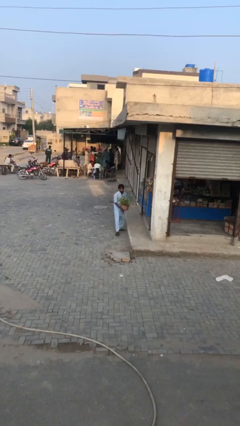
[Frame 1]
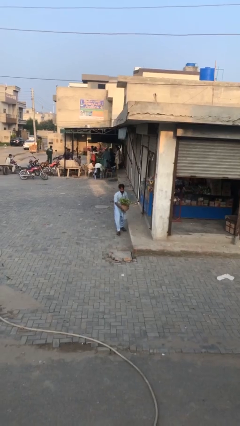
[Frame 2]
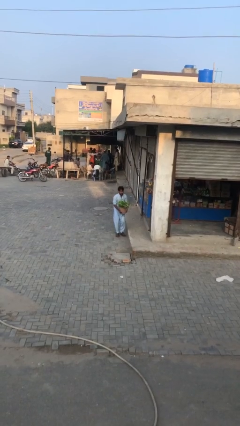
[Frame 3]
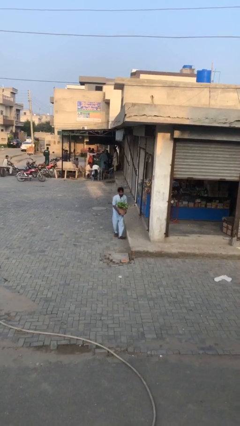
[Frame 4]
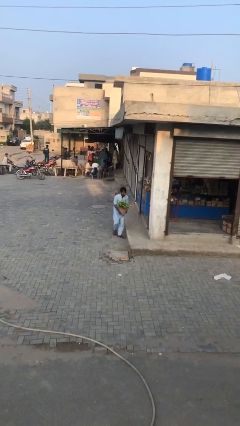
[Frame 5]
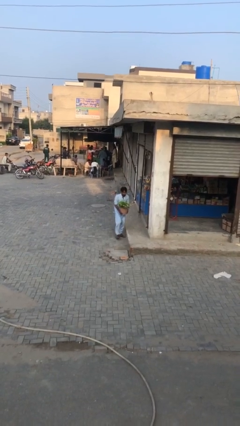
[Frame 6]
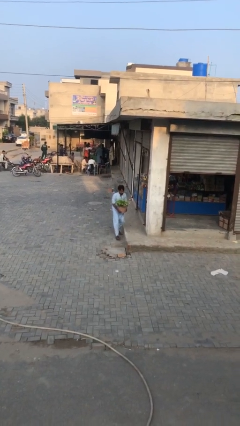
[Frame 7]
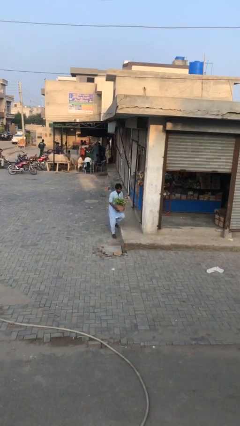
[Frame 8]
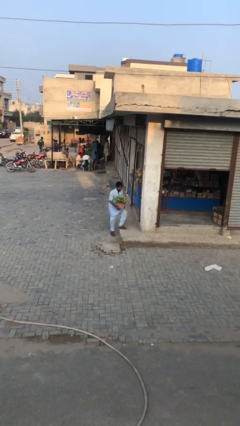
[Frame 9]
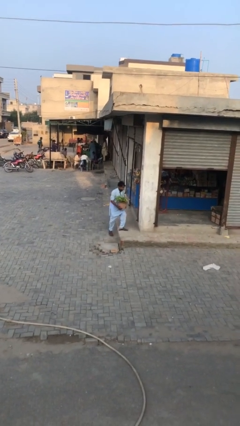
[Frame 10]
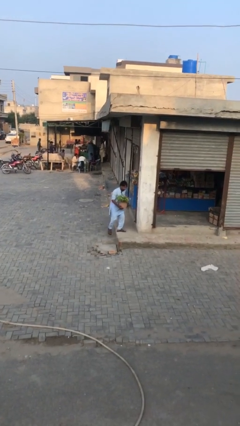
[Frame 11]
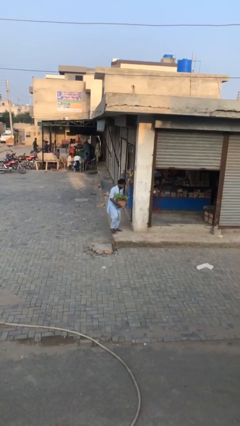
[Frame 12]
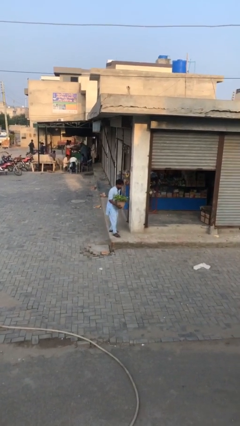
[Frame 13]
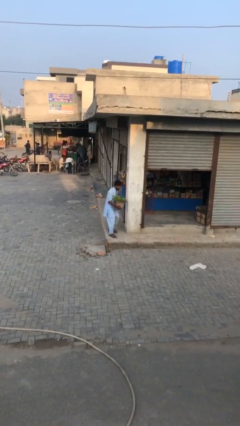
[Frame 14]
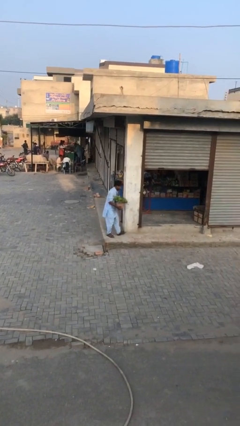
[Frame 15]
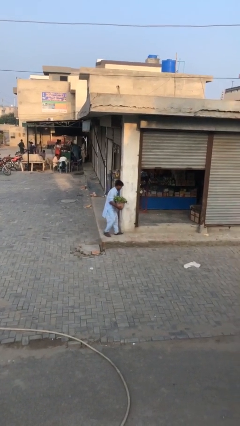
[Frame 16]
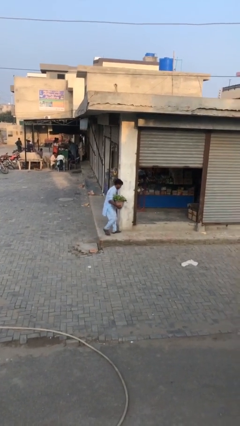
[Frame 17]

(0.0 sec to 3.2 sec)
person carries heavy object

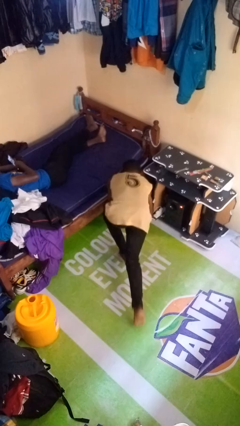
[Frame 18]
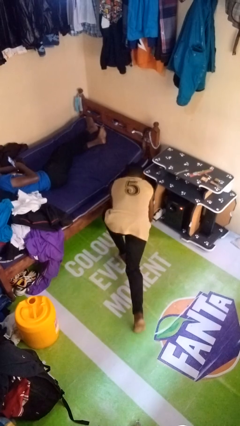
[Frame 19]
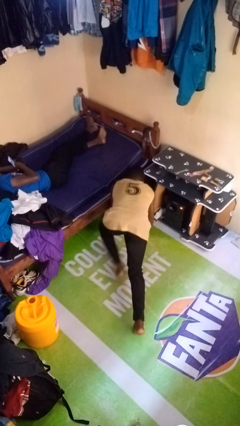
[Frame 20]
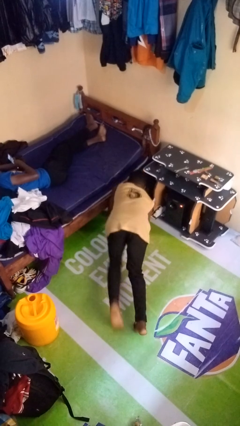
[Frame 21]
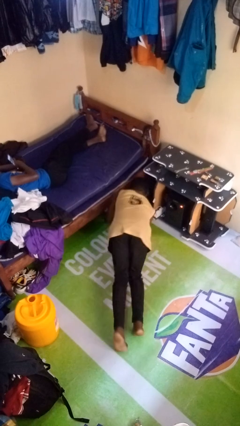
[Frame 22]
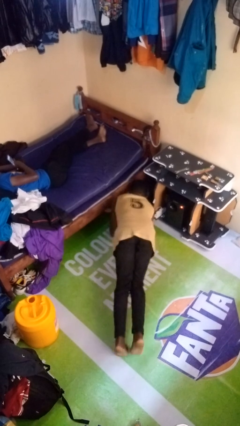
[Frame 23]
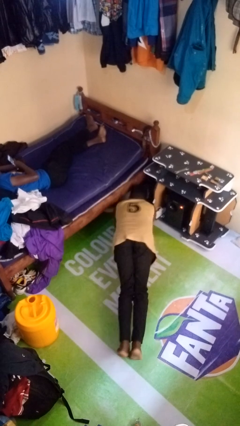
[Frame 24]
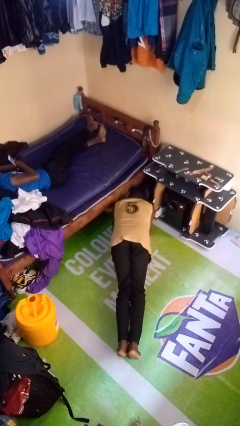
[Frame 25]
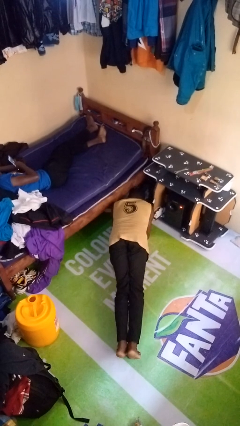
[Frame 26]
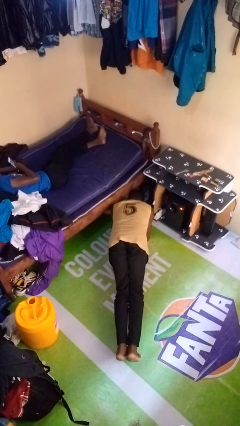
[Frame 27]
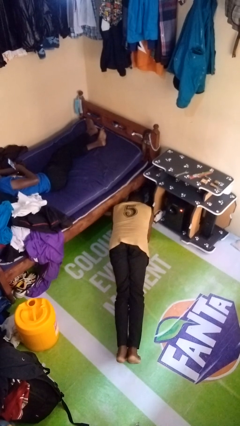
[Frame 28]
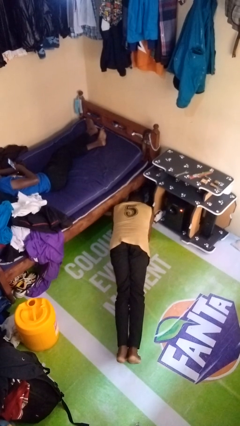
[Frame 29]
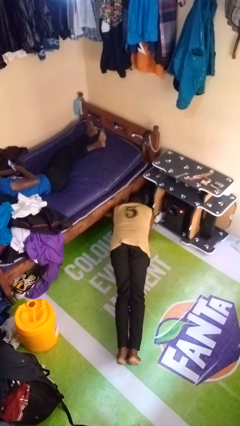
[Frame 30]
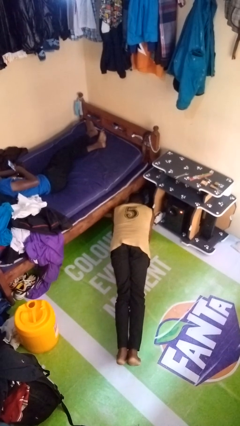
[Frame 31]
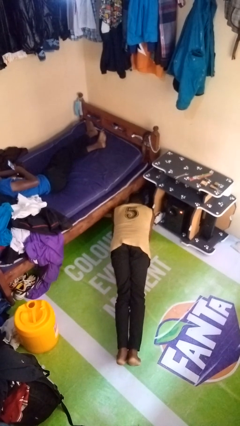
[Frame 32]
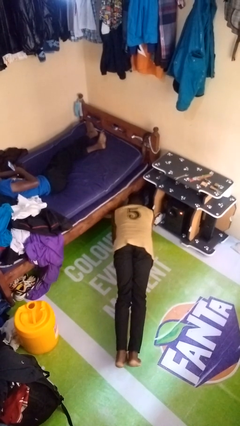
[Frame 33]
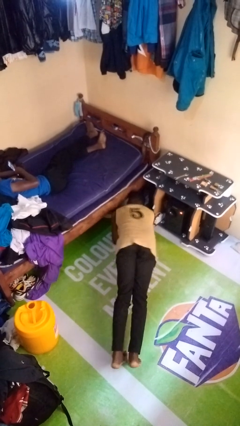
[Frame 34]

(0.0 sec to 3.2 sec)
person exercises with plank

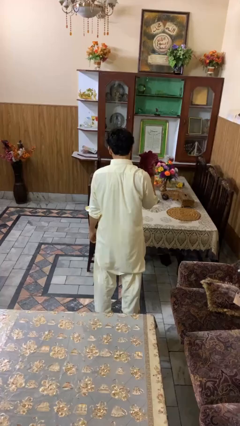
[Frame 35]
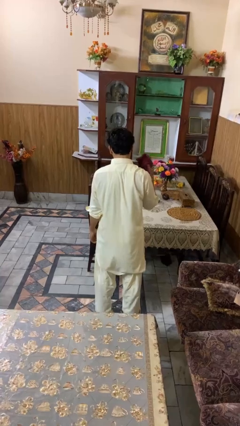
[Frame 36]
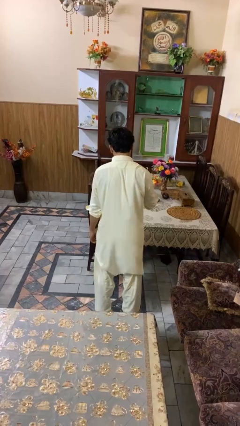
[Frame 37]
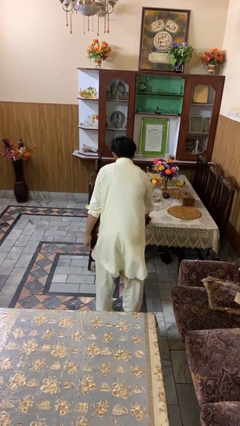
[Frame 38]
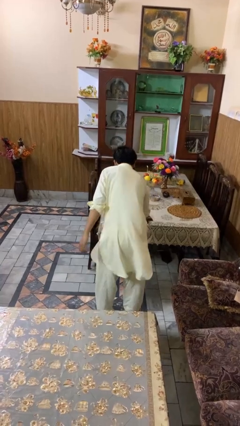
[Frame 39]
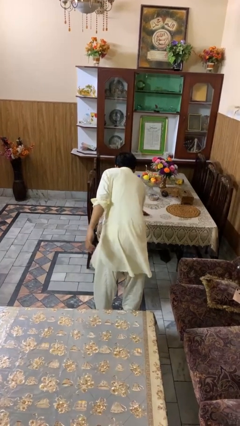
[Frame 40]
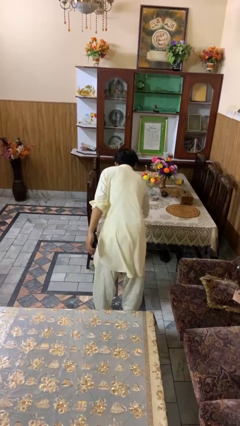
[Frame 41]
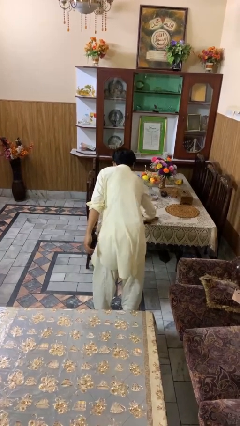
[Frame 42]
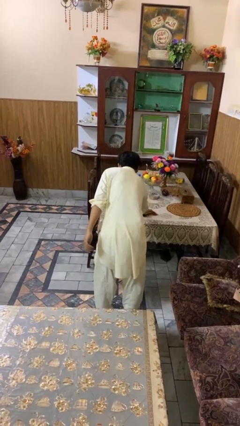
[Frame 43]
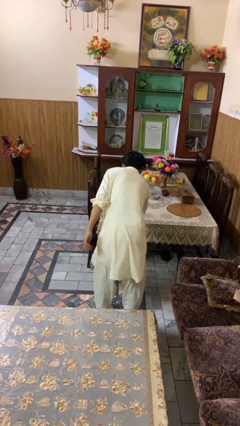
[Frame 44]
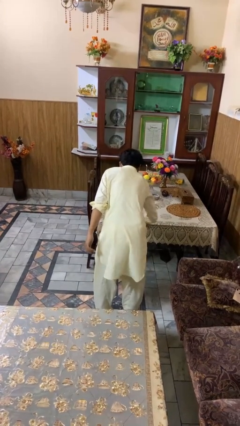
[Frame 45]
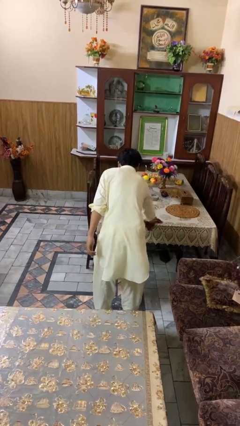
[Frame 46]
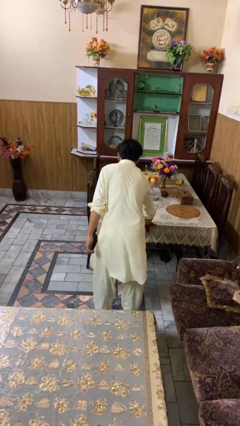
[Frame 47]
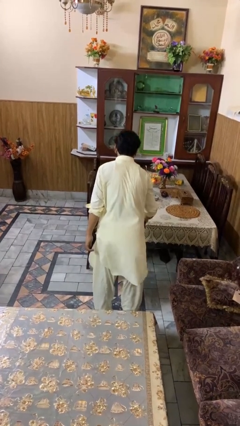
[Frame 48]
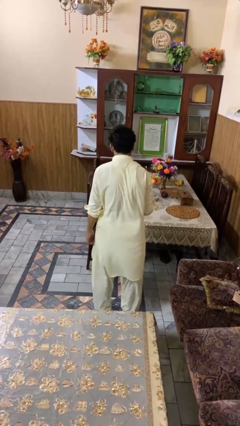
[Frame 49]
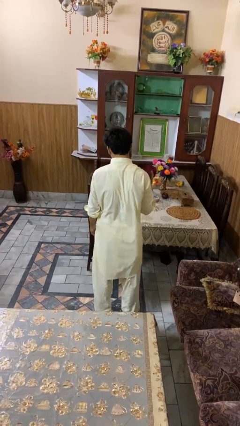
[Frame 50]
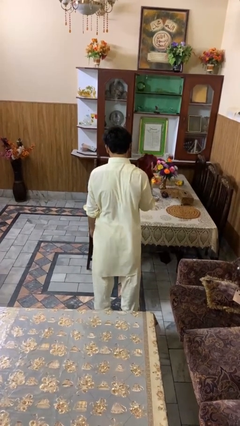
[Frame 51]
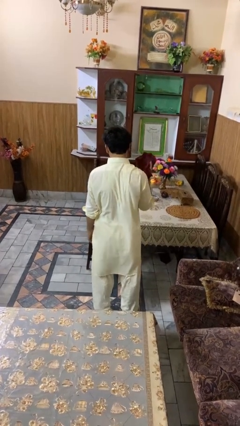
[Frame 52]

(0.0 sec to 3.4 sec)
person cleans table with rag

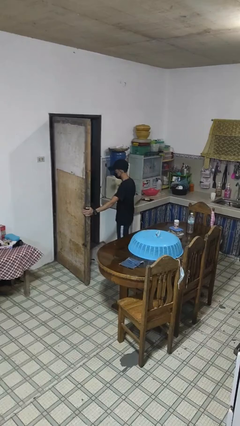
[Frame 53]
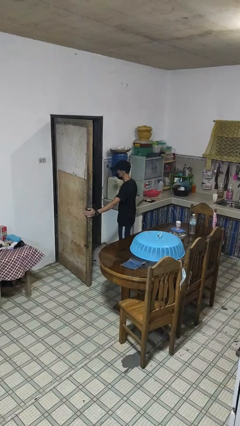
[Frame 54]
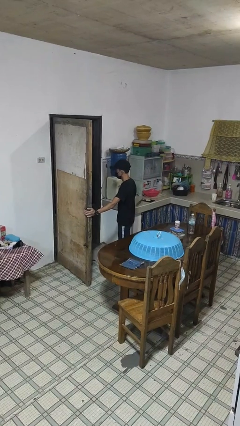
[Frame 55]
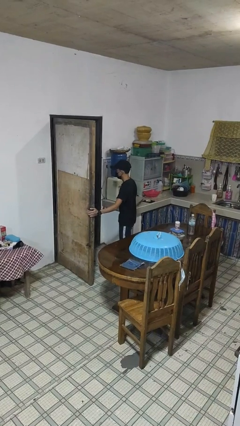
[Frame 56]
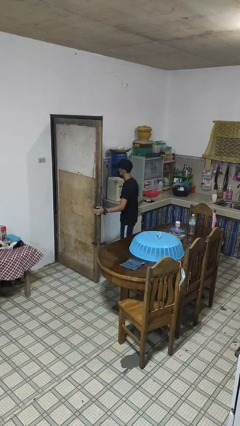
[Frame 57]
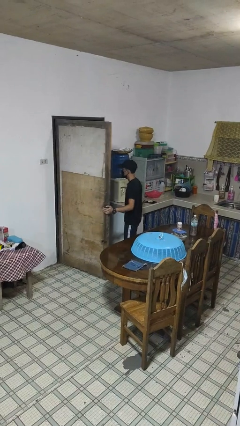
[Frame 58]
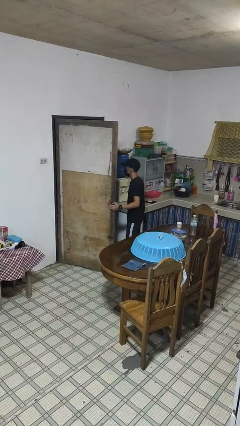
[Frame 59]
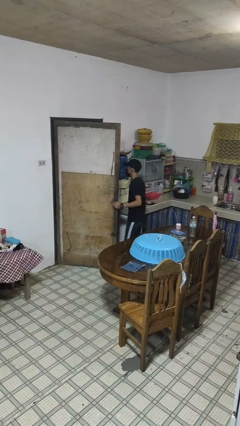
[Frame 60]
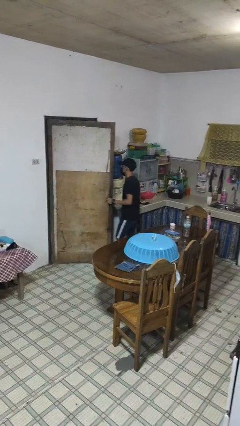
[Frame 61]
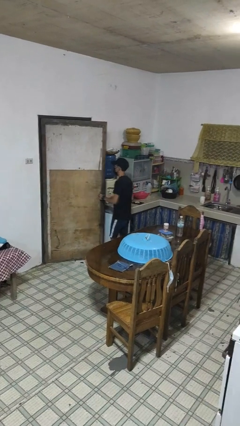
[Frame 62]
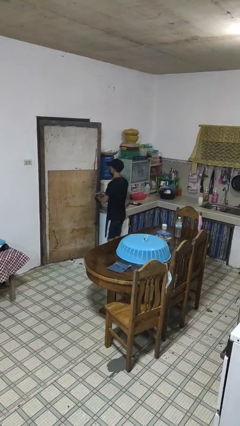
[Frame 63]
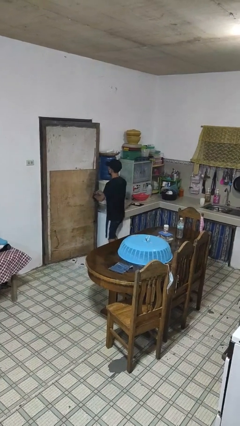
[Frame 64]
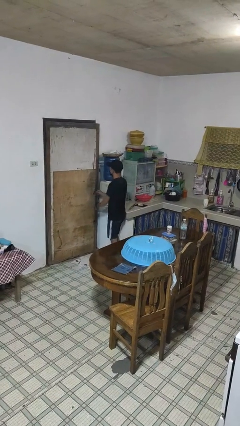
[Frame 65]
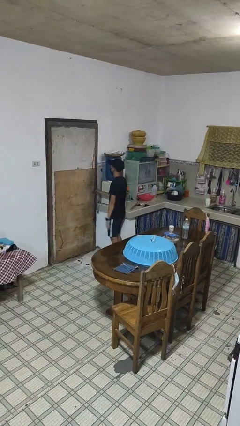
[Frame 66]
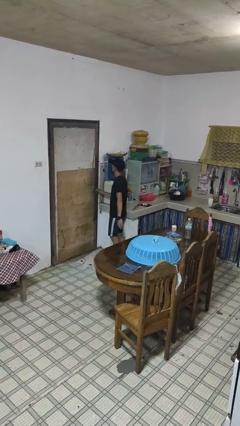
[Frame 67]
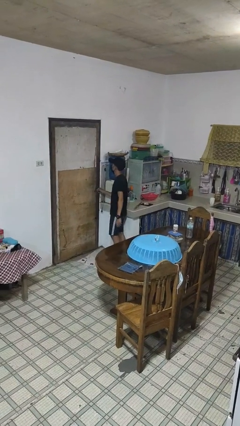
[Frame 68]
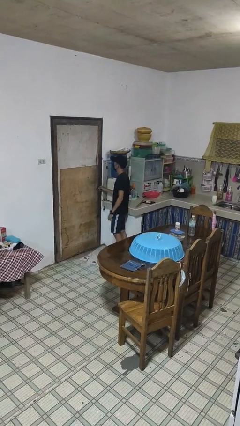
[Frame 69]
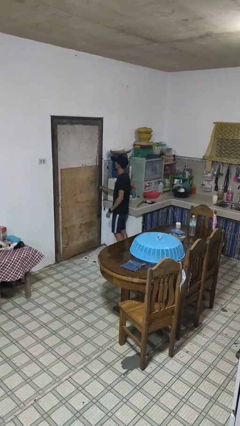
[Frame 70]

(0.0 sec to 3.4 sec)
person closes facility door

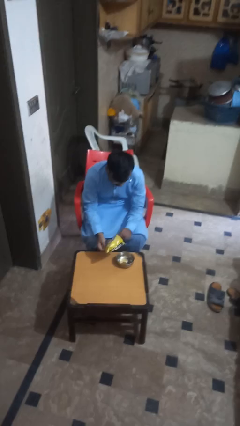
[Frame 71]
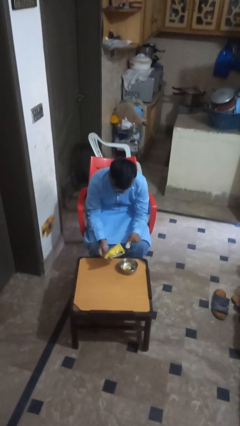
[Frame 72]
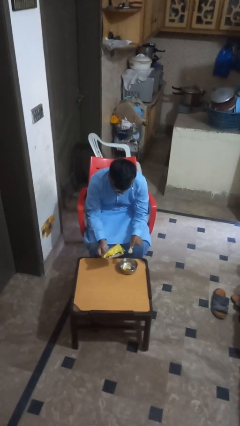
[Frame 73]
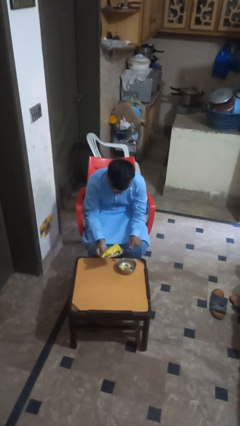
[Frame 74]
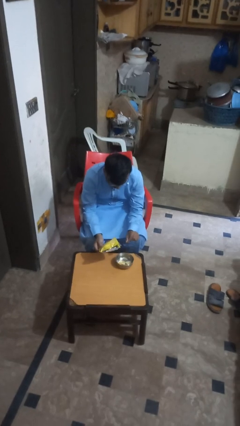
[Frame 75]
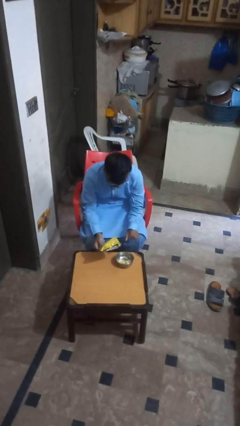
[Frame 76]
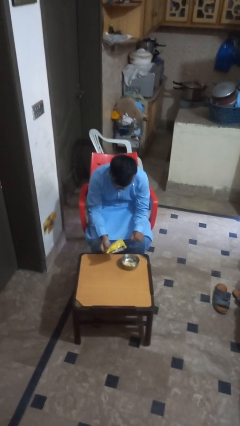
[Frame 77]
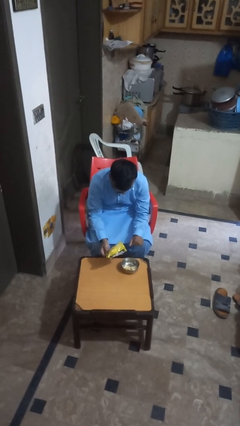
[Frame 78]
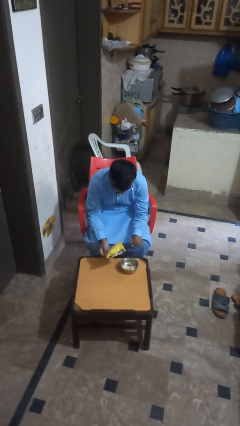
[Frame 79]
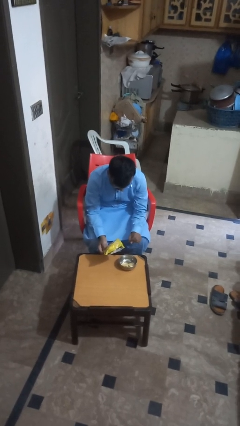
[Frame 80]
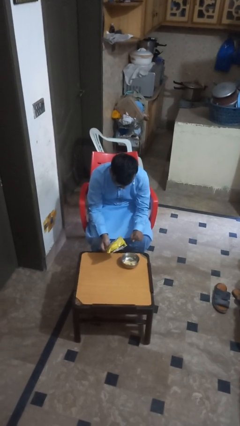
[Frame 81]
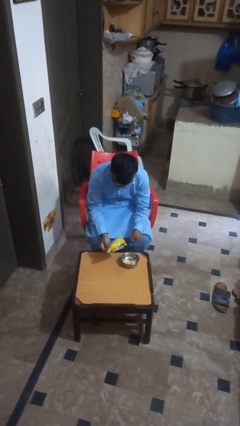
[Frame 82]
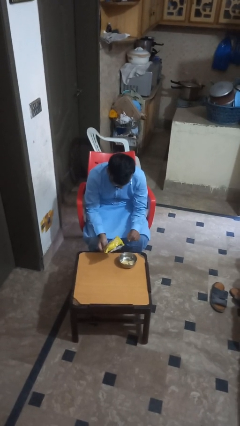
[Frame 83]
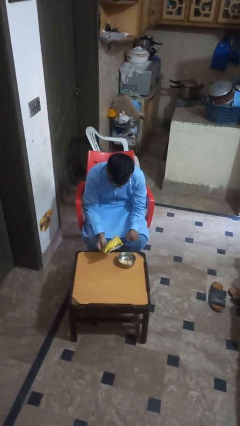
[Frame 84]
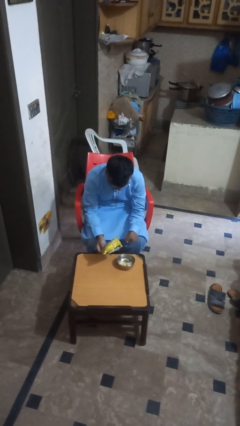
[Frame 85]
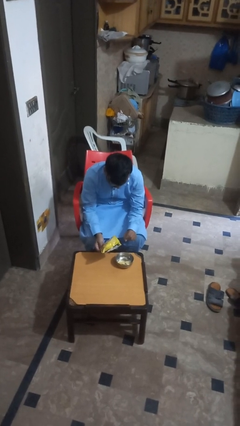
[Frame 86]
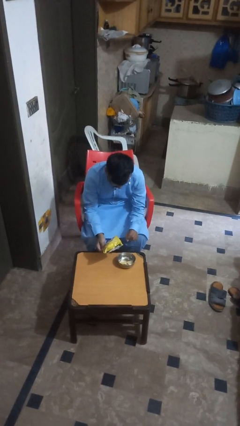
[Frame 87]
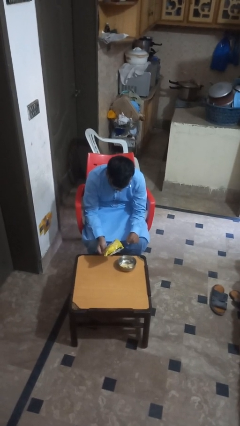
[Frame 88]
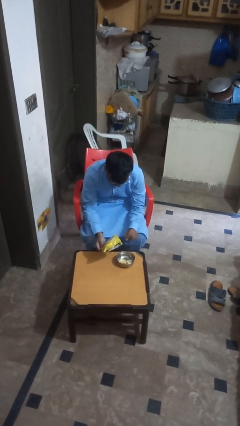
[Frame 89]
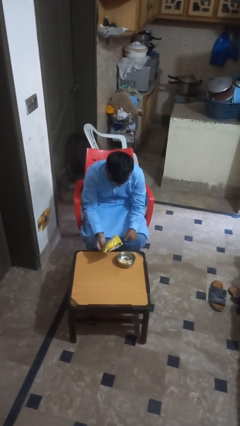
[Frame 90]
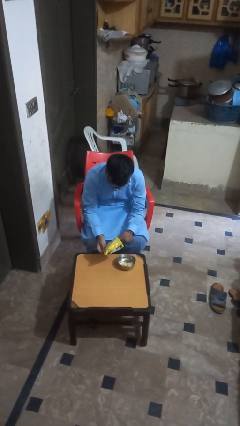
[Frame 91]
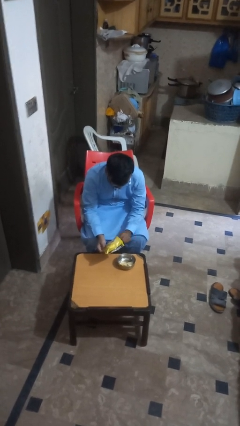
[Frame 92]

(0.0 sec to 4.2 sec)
person pours into bowl

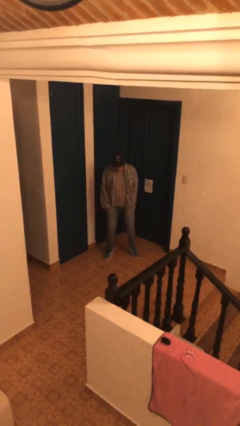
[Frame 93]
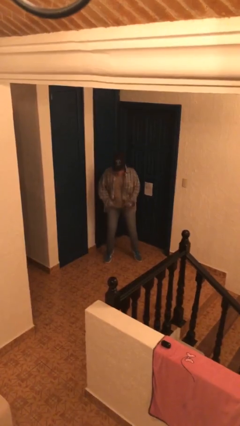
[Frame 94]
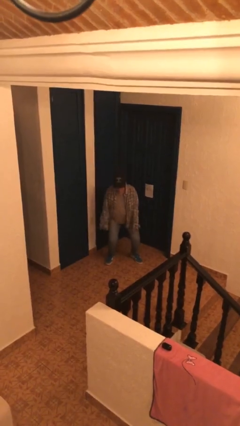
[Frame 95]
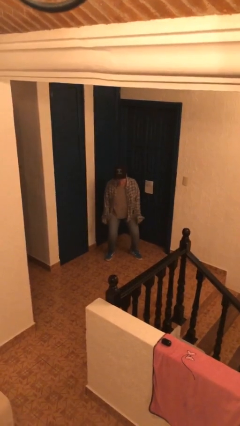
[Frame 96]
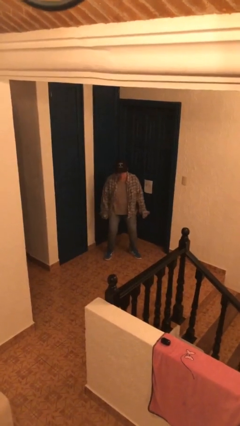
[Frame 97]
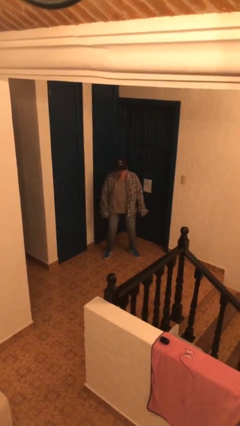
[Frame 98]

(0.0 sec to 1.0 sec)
person jumps
